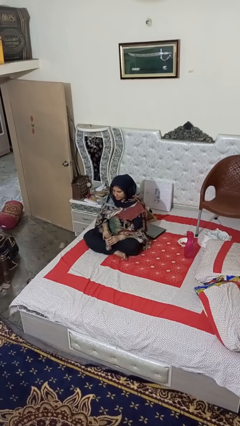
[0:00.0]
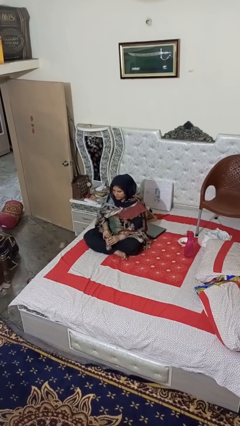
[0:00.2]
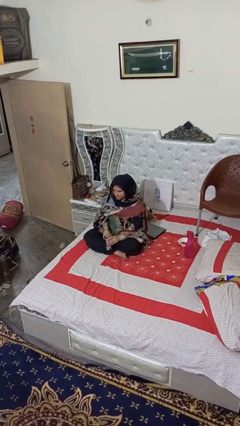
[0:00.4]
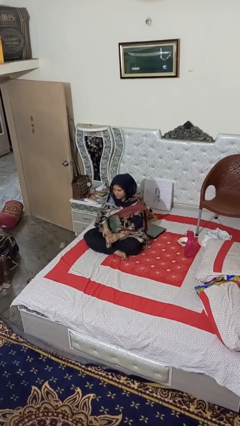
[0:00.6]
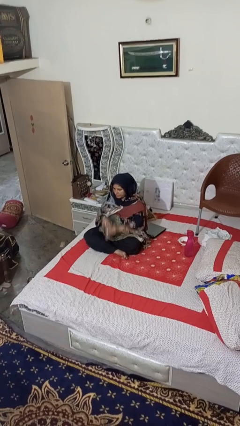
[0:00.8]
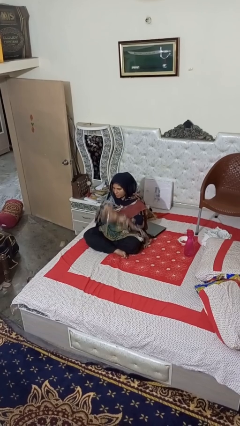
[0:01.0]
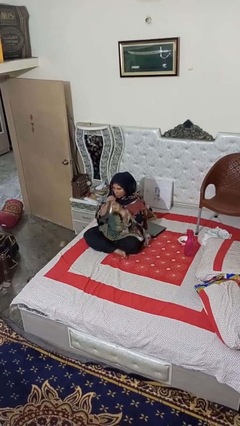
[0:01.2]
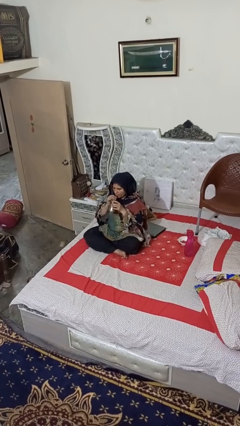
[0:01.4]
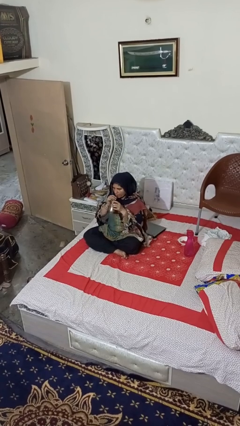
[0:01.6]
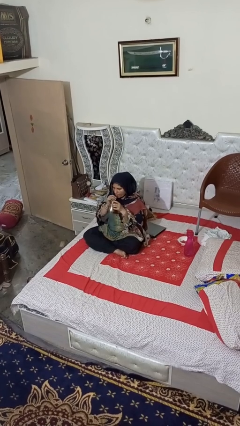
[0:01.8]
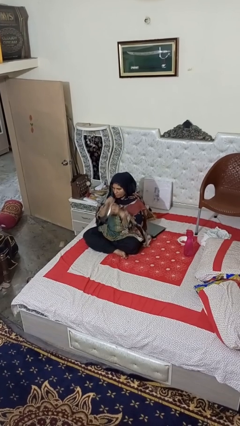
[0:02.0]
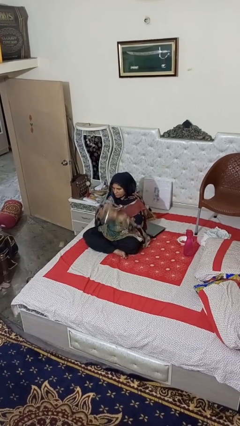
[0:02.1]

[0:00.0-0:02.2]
person drinks from straw

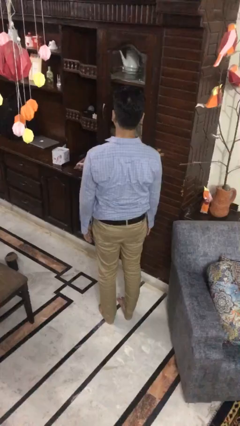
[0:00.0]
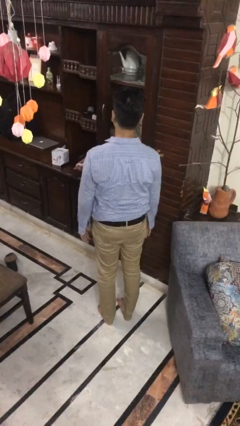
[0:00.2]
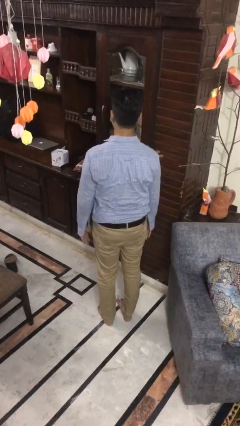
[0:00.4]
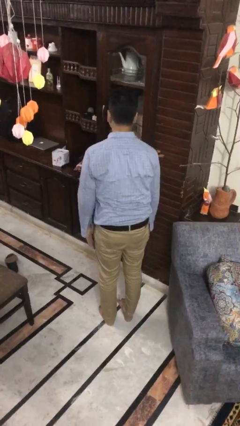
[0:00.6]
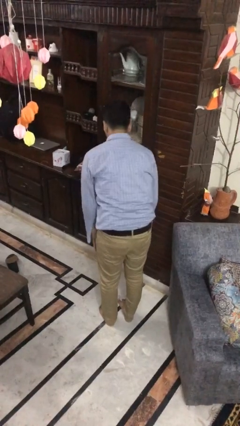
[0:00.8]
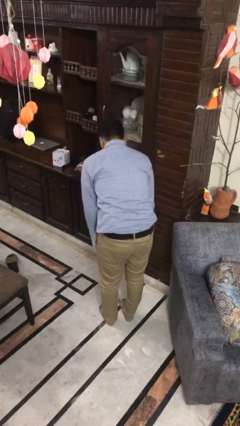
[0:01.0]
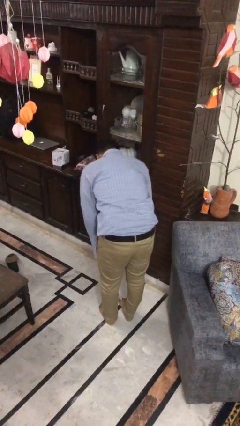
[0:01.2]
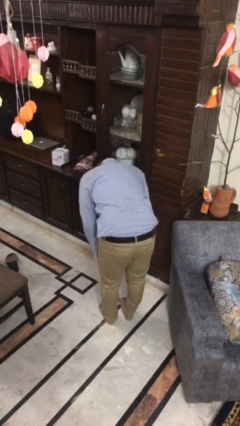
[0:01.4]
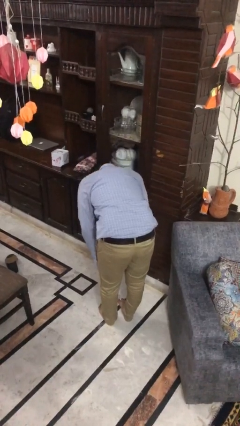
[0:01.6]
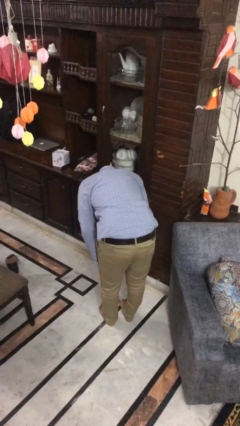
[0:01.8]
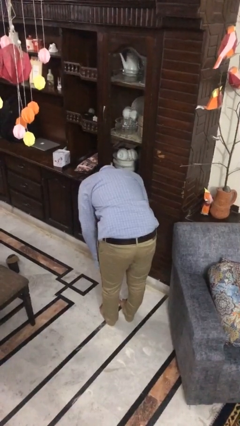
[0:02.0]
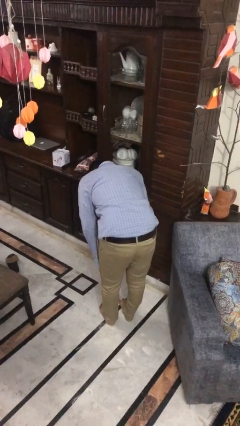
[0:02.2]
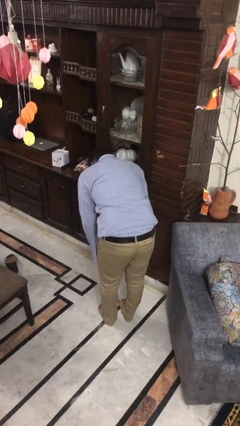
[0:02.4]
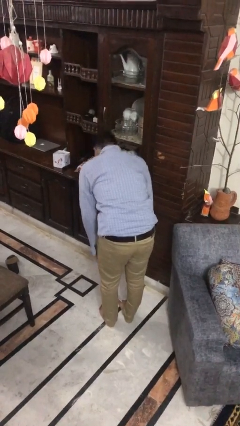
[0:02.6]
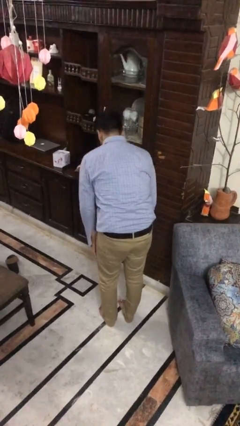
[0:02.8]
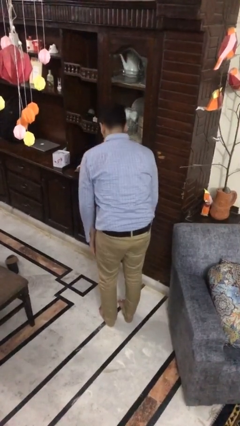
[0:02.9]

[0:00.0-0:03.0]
person bows

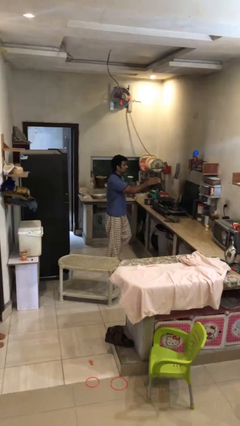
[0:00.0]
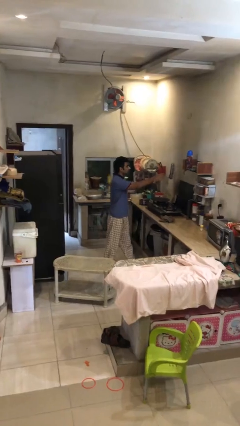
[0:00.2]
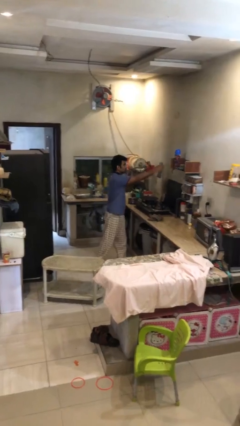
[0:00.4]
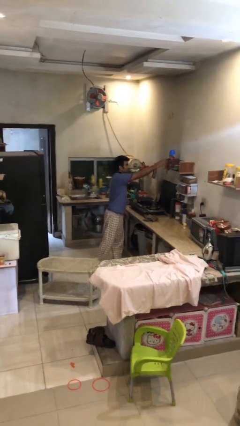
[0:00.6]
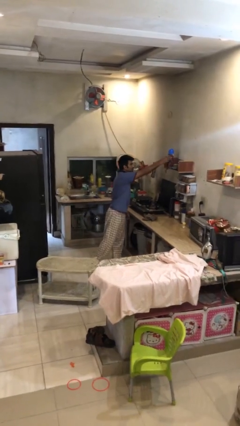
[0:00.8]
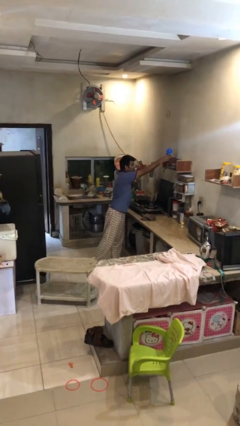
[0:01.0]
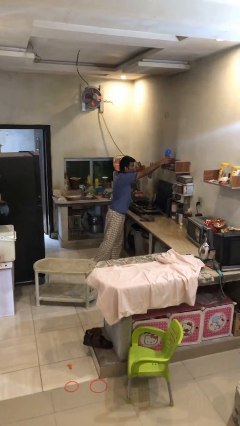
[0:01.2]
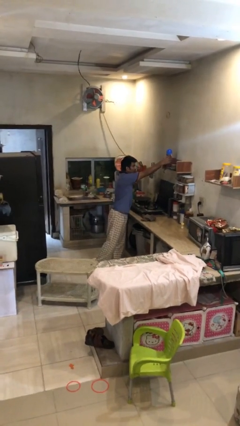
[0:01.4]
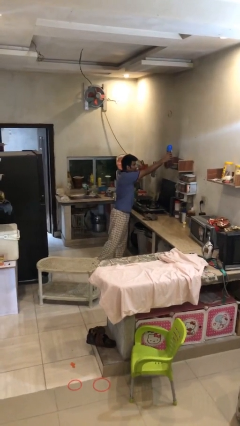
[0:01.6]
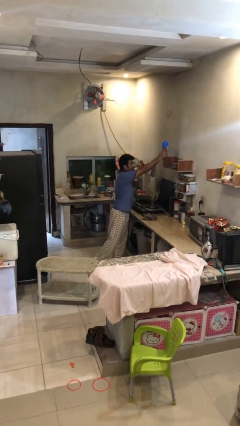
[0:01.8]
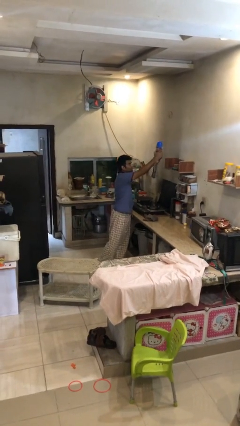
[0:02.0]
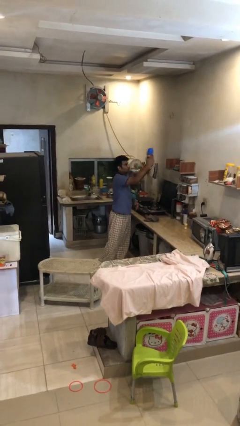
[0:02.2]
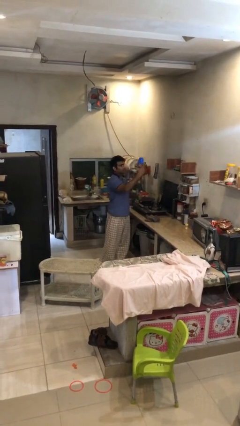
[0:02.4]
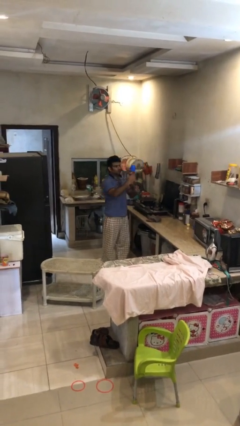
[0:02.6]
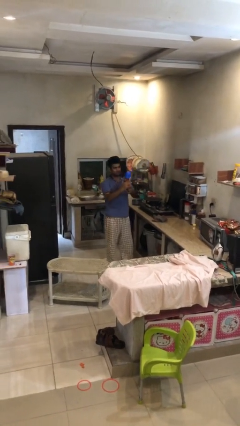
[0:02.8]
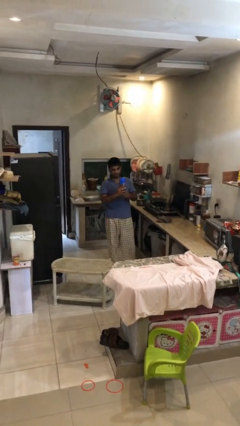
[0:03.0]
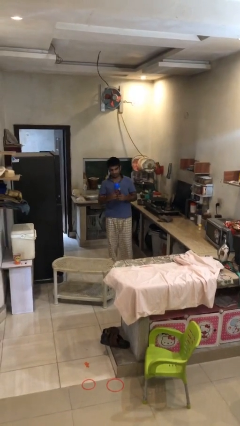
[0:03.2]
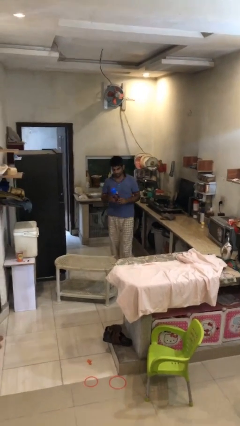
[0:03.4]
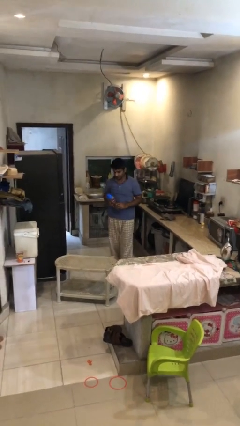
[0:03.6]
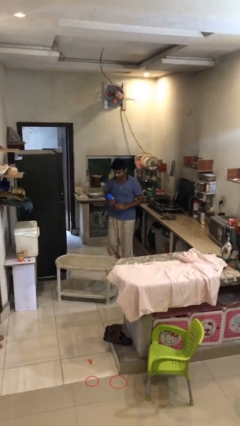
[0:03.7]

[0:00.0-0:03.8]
person picks up object from shelf

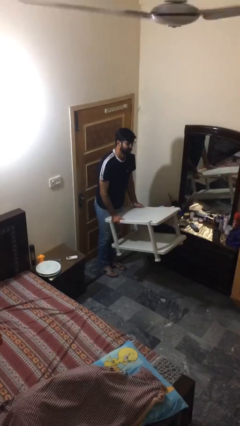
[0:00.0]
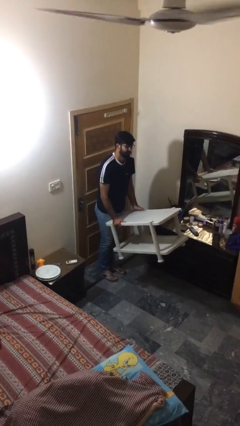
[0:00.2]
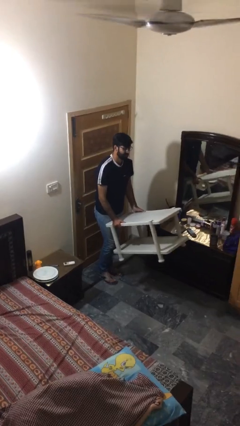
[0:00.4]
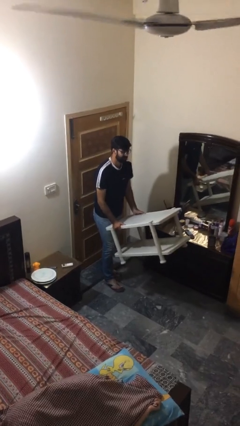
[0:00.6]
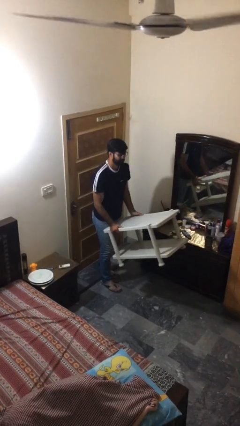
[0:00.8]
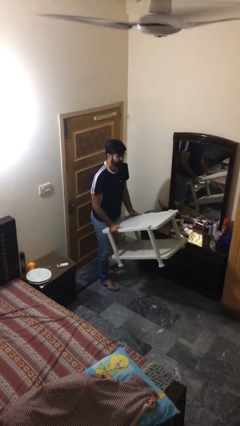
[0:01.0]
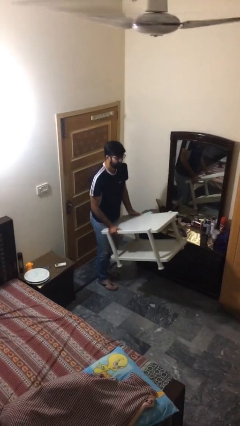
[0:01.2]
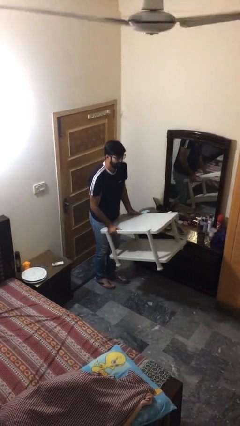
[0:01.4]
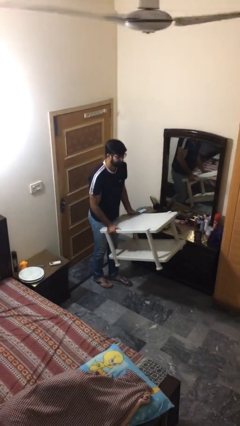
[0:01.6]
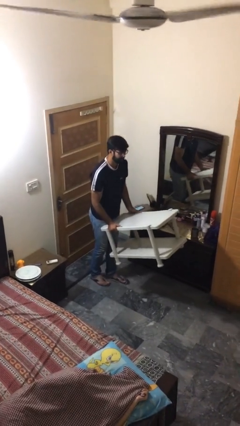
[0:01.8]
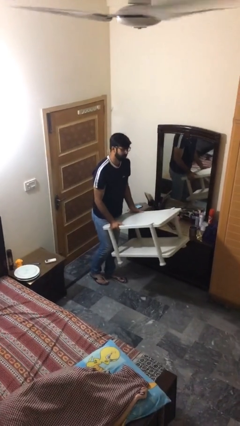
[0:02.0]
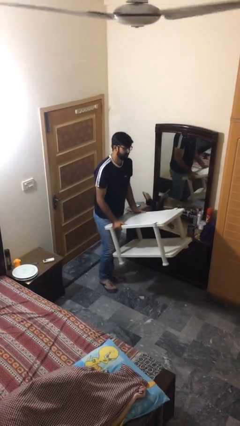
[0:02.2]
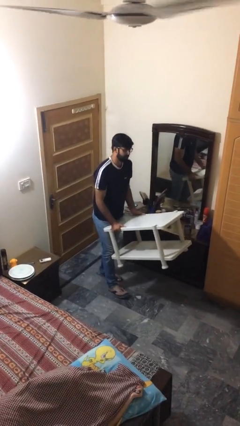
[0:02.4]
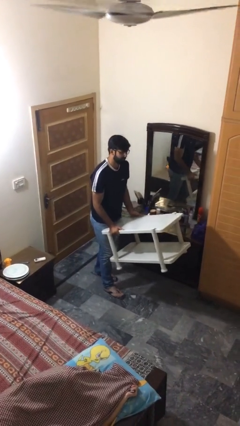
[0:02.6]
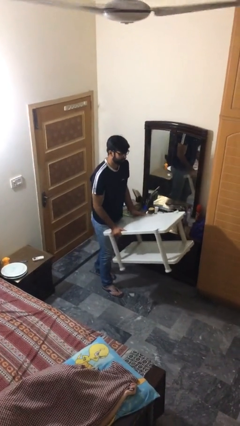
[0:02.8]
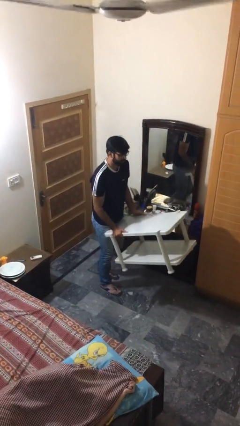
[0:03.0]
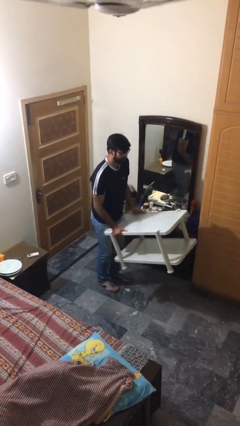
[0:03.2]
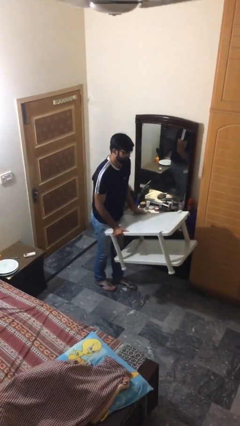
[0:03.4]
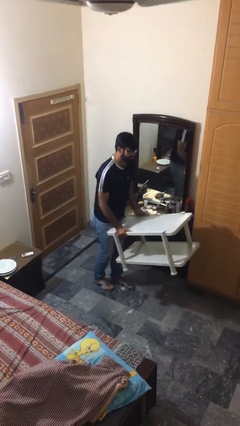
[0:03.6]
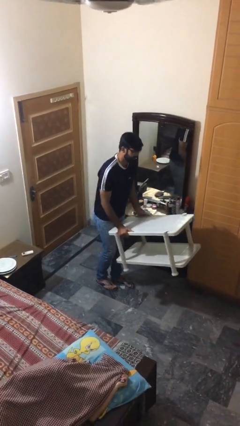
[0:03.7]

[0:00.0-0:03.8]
person carries heavy object

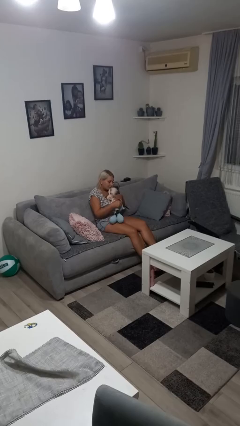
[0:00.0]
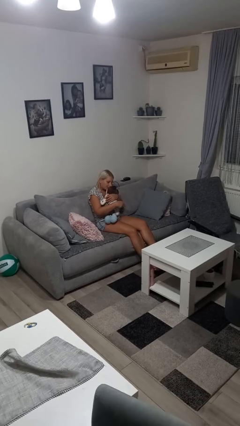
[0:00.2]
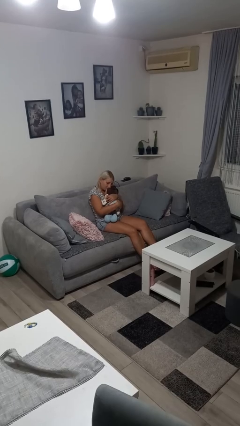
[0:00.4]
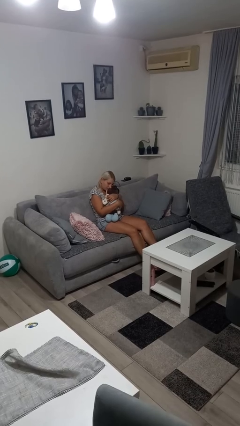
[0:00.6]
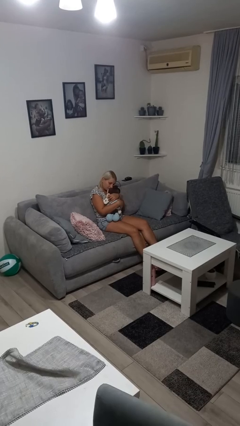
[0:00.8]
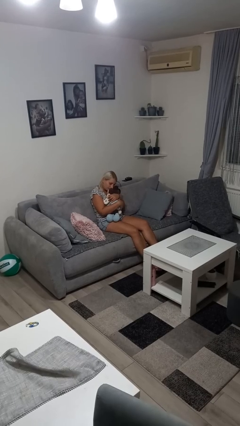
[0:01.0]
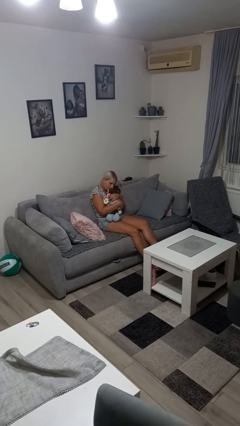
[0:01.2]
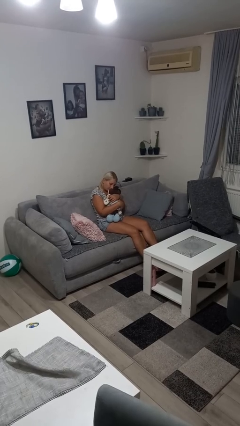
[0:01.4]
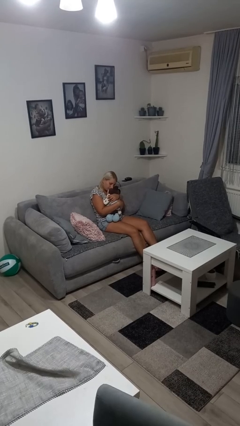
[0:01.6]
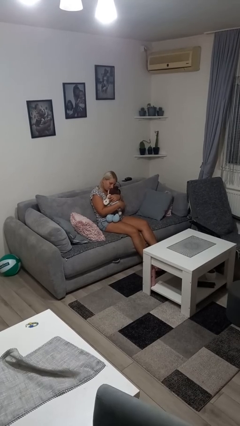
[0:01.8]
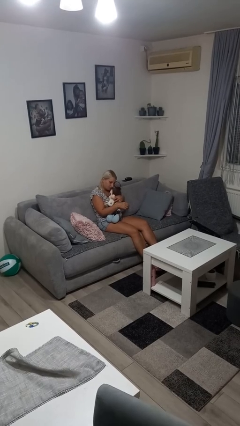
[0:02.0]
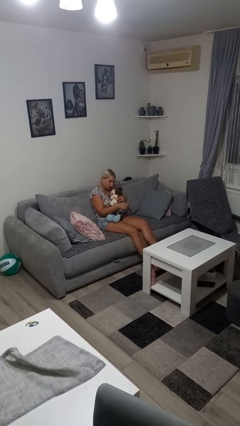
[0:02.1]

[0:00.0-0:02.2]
person hugs stuffed animal

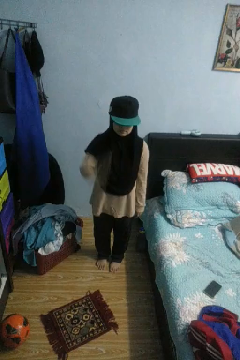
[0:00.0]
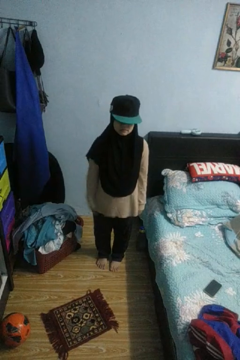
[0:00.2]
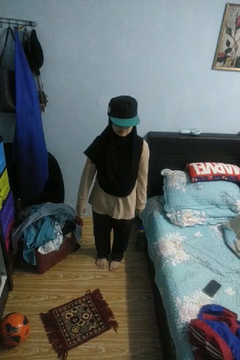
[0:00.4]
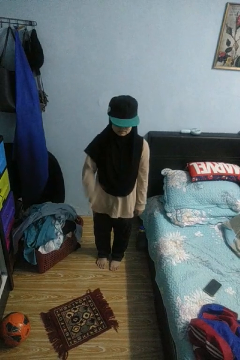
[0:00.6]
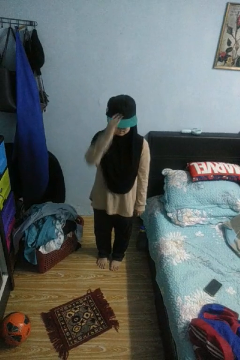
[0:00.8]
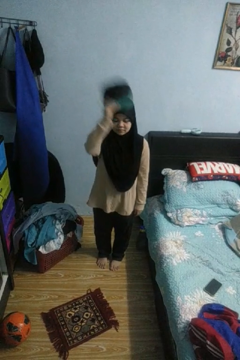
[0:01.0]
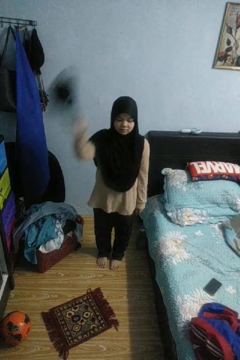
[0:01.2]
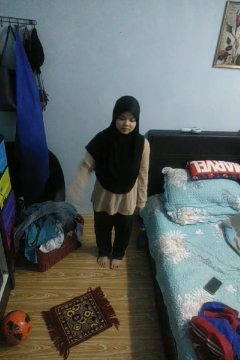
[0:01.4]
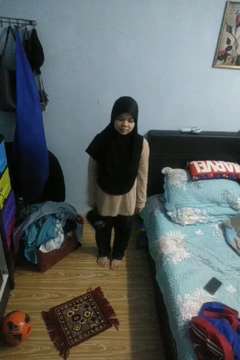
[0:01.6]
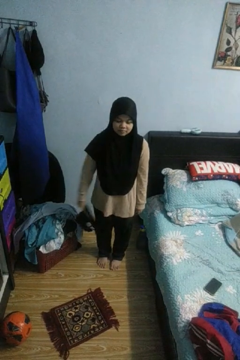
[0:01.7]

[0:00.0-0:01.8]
person takes off hat

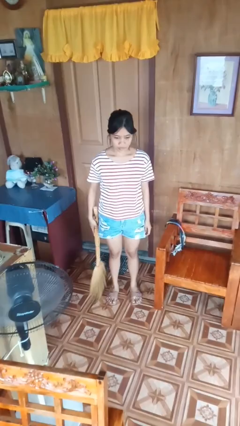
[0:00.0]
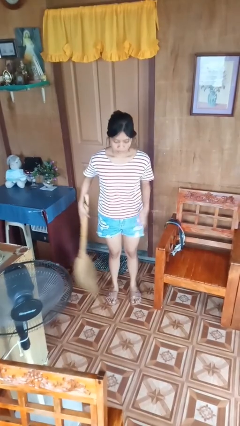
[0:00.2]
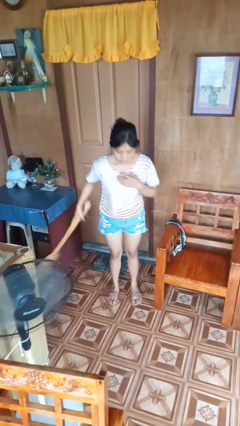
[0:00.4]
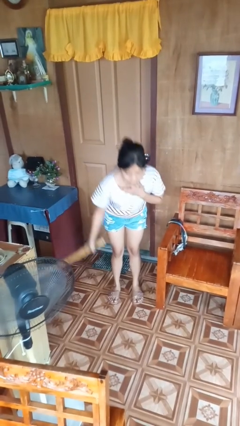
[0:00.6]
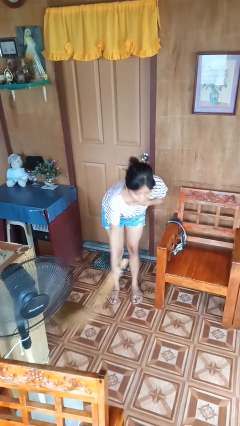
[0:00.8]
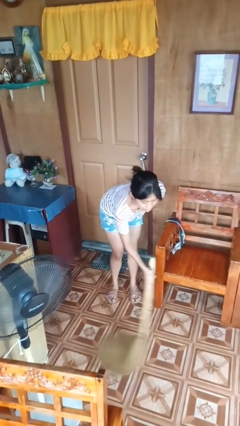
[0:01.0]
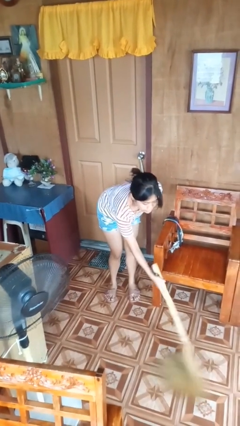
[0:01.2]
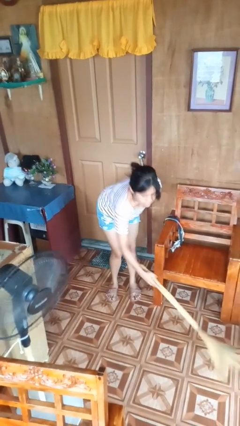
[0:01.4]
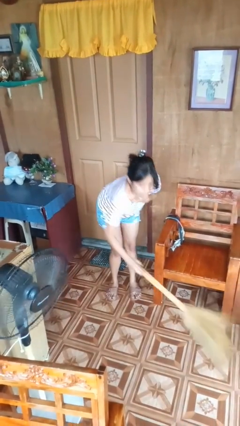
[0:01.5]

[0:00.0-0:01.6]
person sweeps floor
